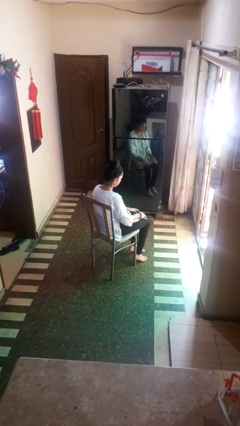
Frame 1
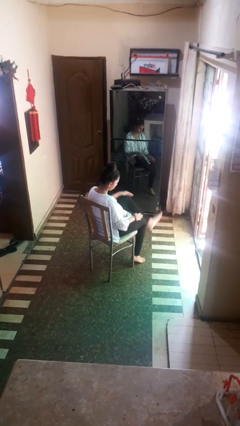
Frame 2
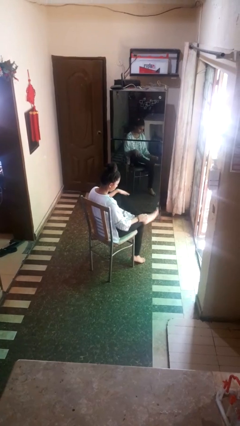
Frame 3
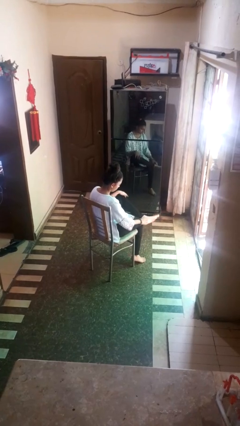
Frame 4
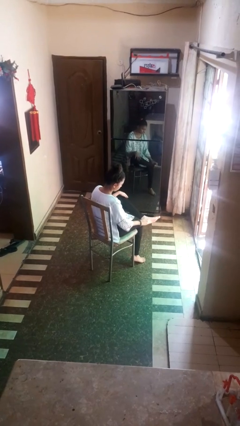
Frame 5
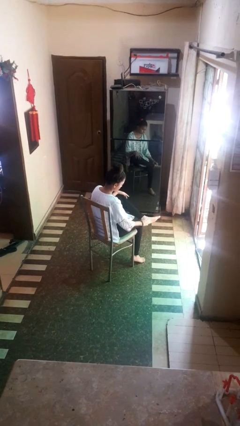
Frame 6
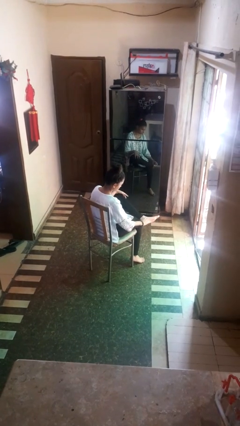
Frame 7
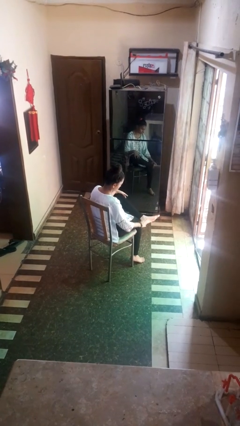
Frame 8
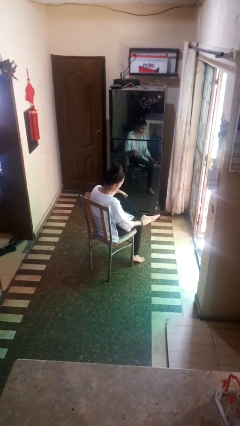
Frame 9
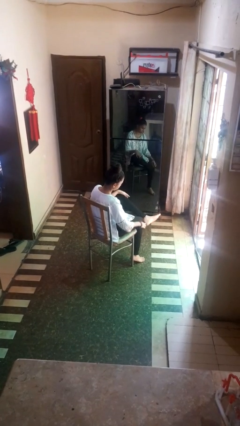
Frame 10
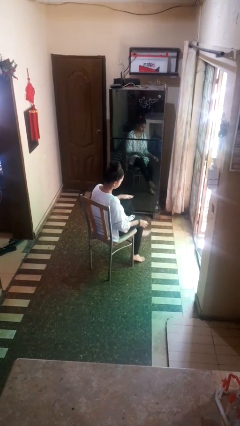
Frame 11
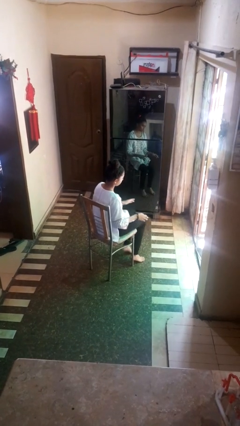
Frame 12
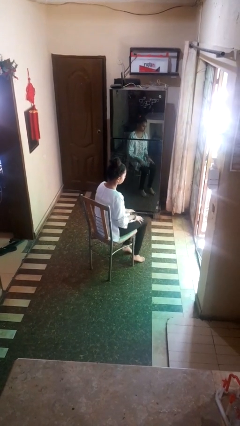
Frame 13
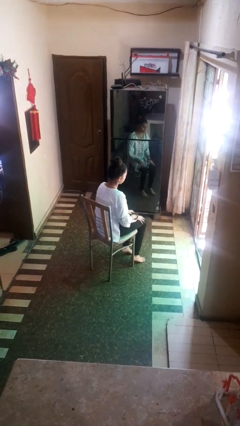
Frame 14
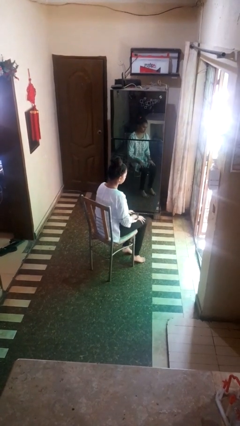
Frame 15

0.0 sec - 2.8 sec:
person rubs foot

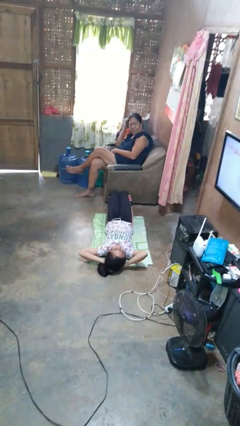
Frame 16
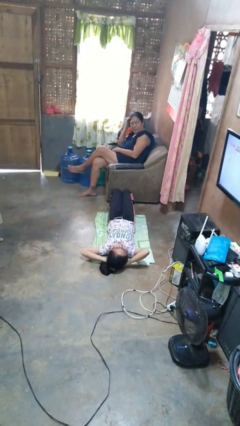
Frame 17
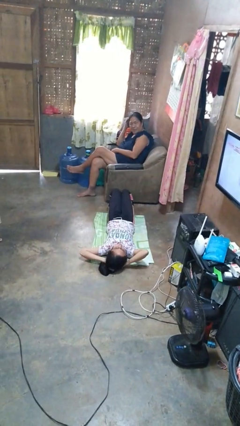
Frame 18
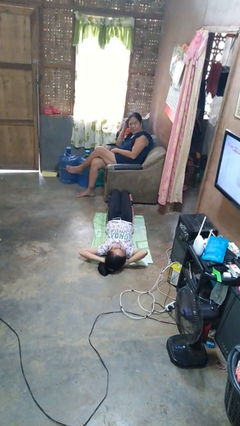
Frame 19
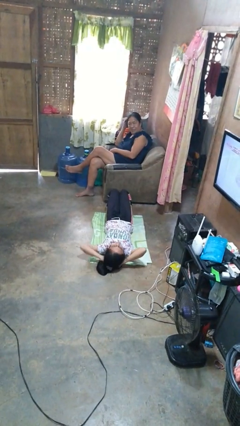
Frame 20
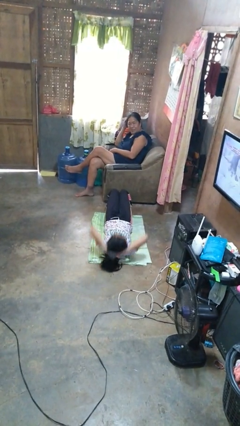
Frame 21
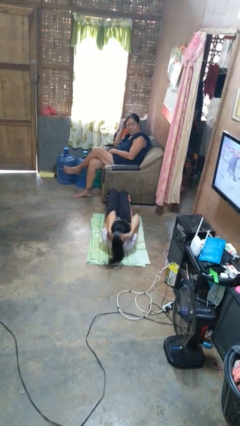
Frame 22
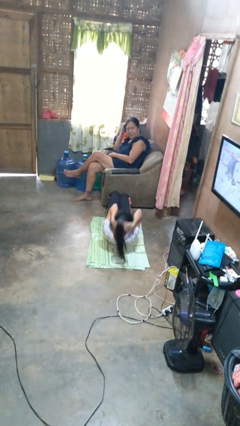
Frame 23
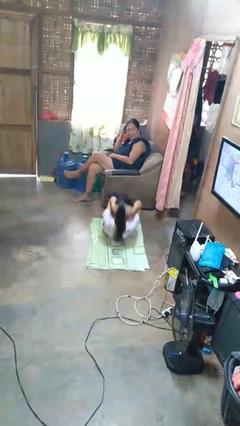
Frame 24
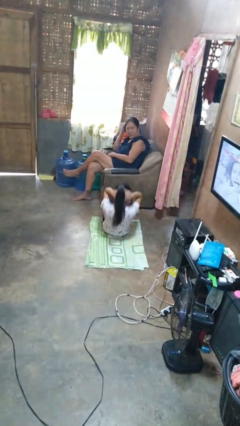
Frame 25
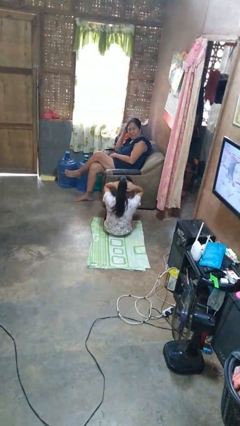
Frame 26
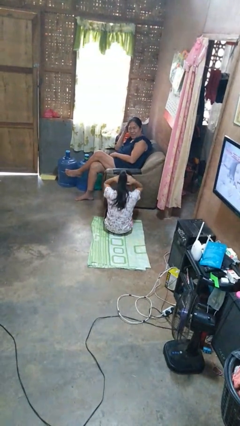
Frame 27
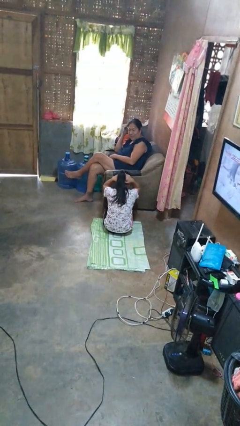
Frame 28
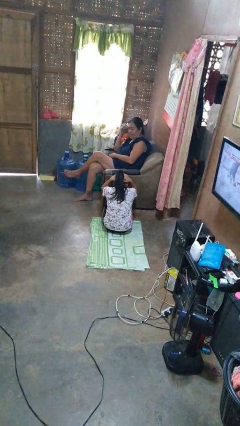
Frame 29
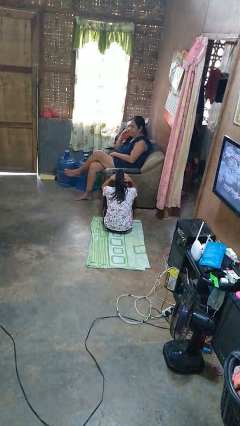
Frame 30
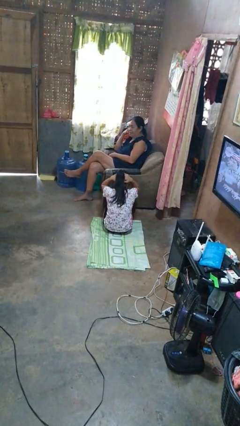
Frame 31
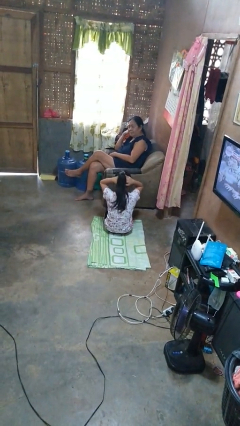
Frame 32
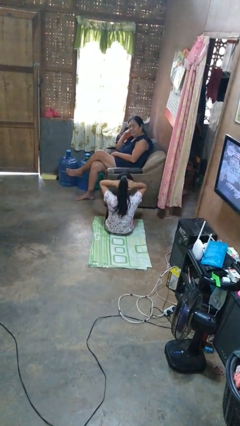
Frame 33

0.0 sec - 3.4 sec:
person exercises with situp

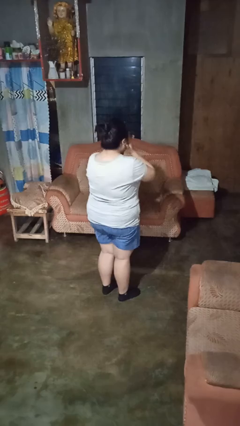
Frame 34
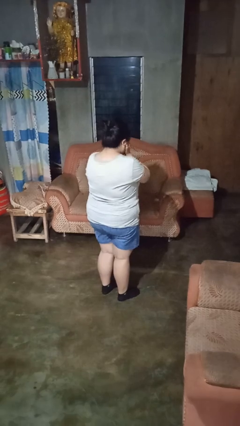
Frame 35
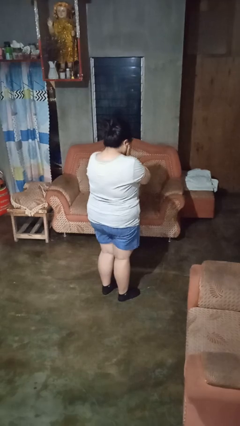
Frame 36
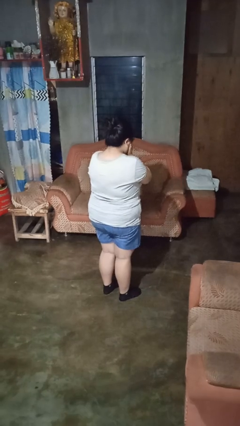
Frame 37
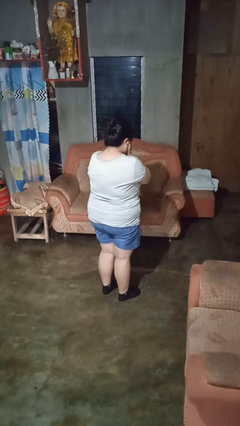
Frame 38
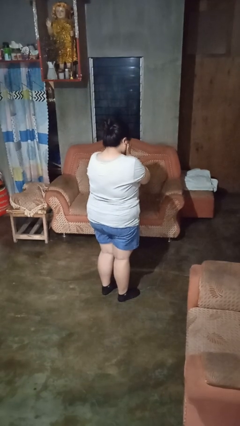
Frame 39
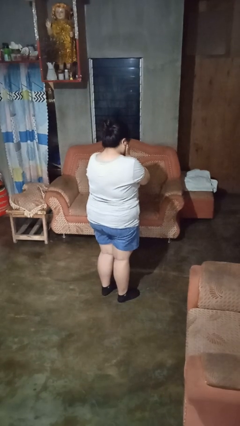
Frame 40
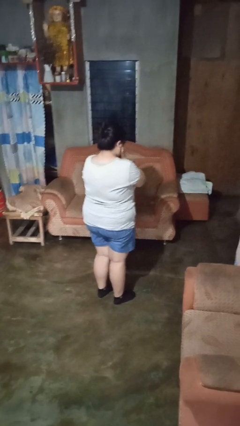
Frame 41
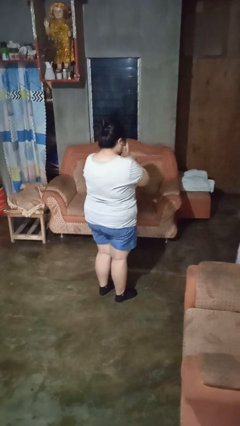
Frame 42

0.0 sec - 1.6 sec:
person covers face with hands

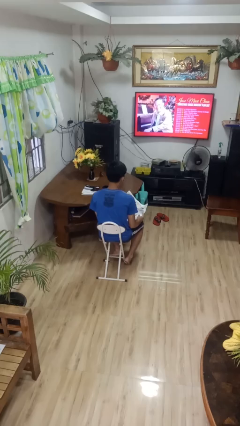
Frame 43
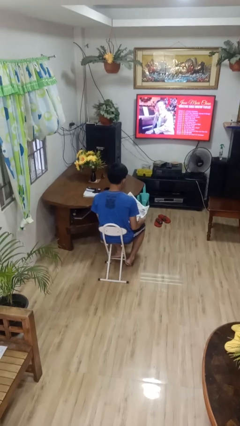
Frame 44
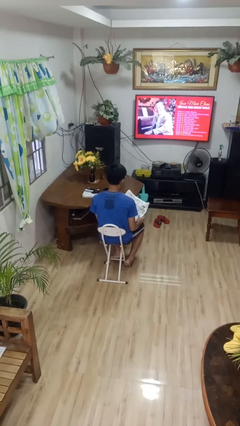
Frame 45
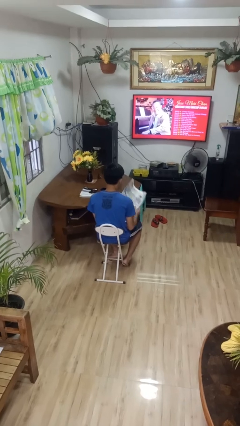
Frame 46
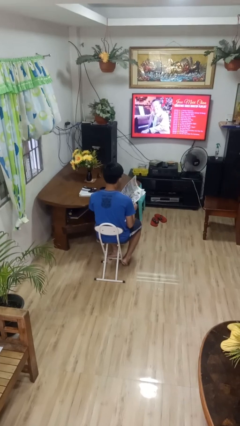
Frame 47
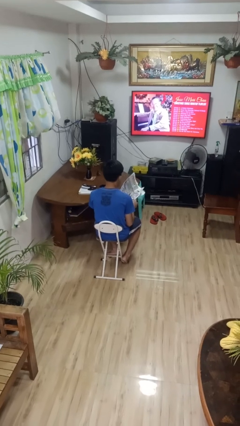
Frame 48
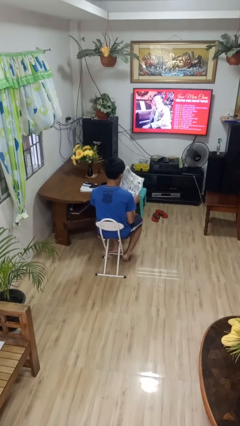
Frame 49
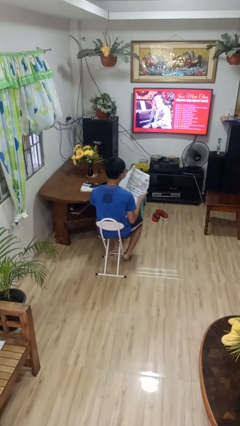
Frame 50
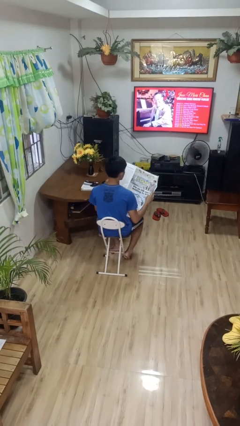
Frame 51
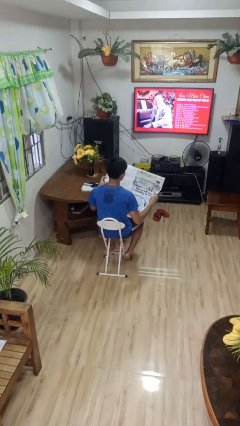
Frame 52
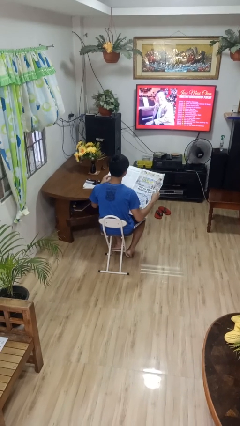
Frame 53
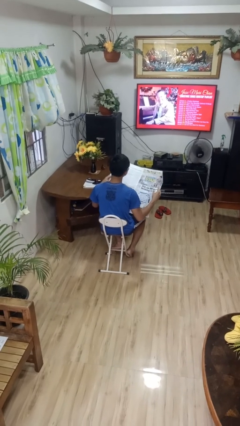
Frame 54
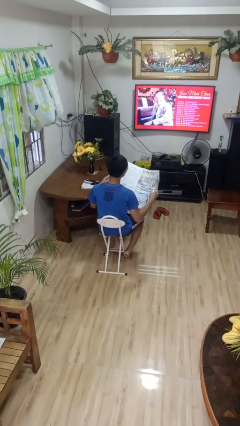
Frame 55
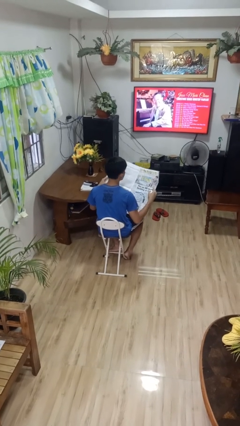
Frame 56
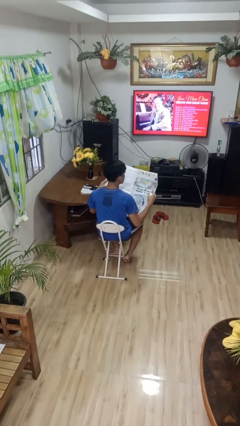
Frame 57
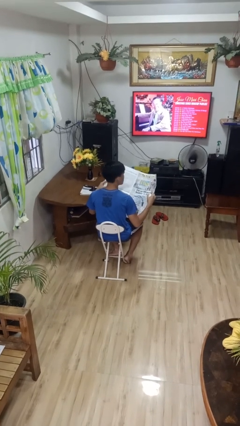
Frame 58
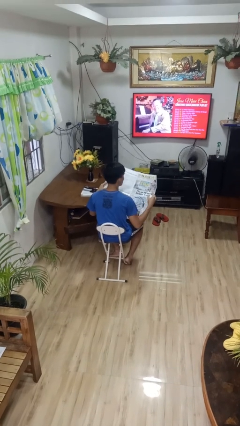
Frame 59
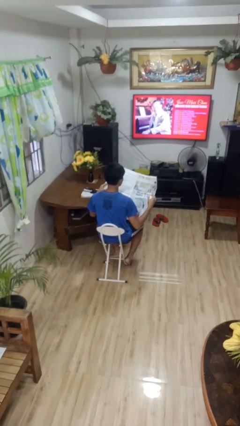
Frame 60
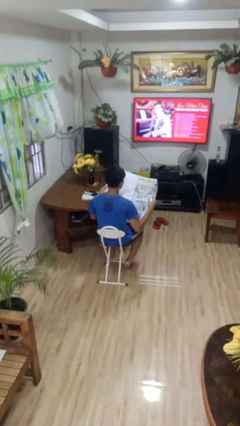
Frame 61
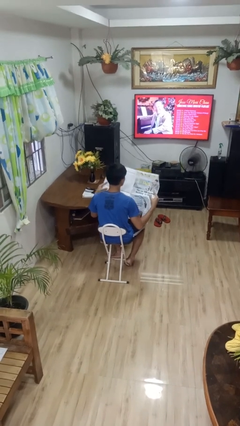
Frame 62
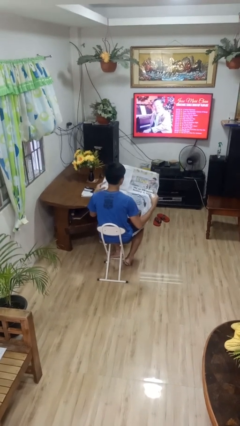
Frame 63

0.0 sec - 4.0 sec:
person reads newspaper

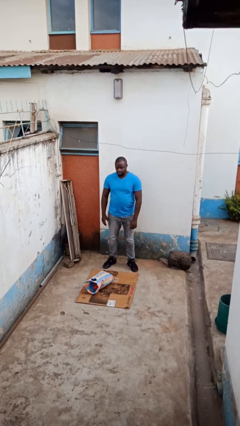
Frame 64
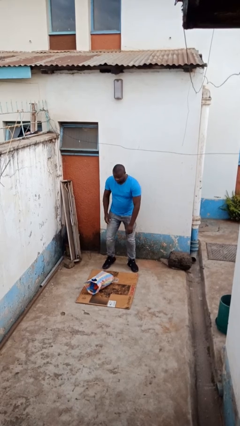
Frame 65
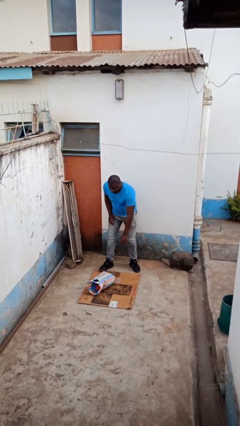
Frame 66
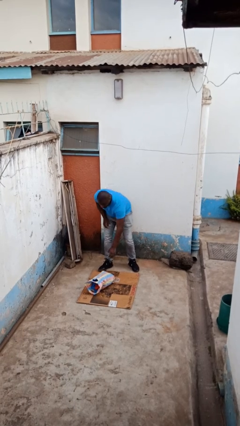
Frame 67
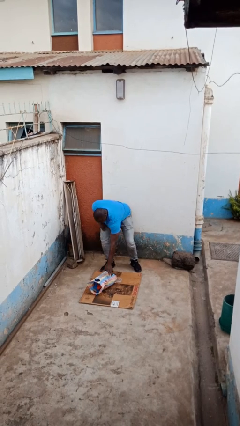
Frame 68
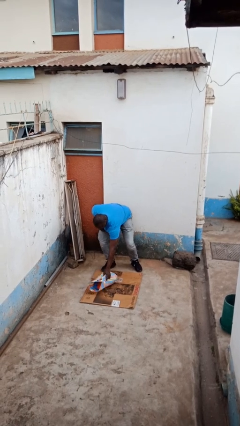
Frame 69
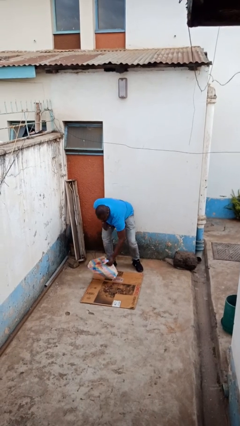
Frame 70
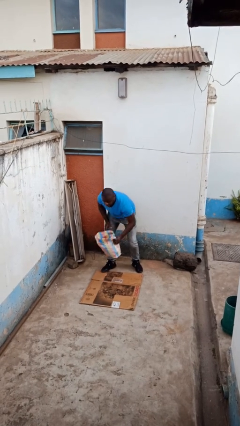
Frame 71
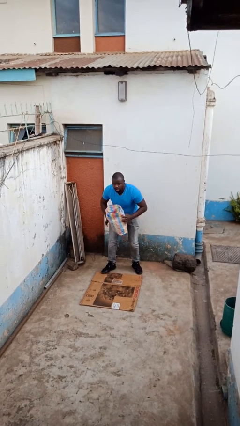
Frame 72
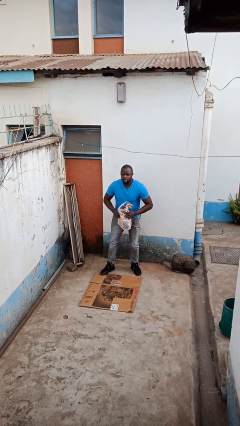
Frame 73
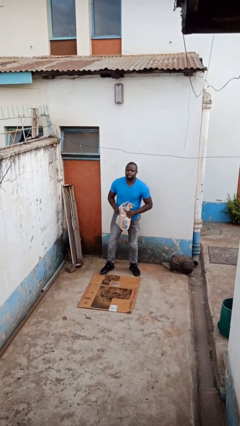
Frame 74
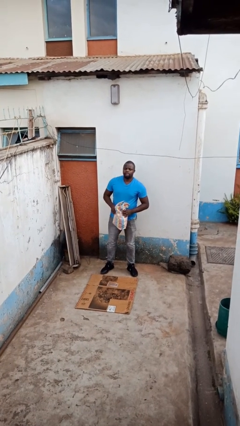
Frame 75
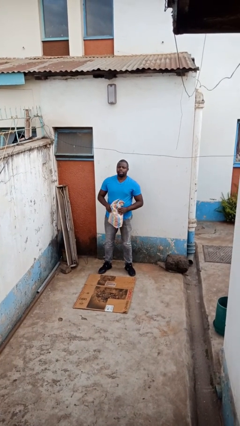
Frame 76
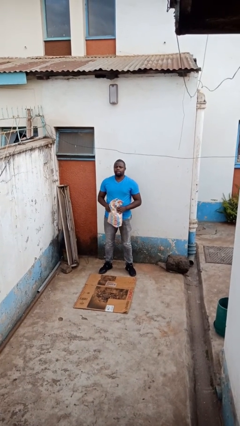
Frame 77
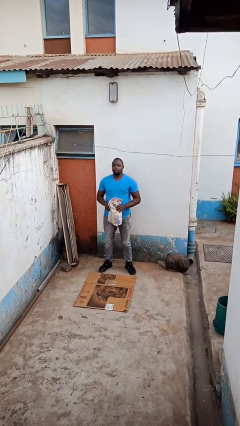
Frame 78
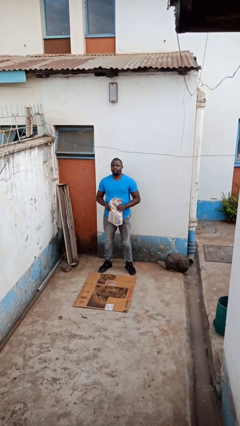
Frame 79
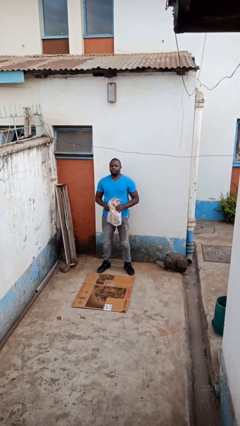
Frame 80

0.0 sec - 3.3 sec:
person picks up object from floor

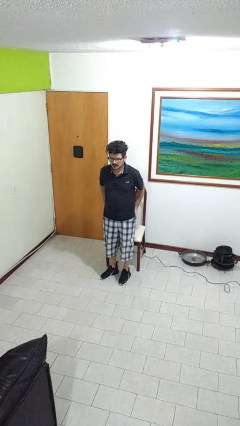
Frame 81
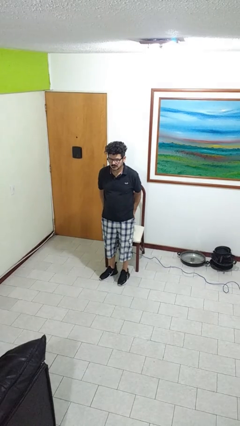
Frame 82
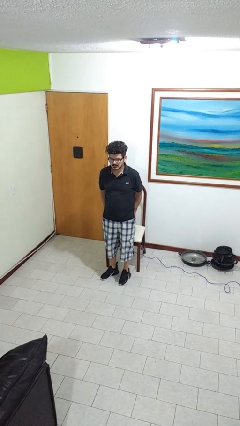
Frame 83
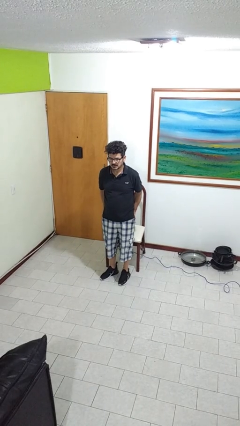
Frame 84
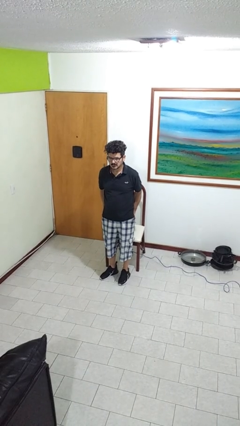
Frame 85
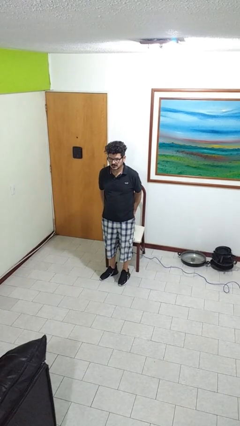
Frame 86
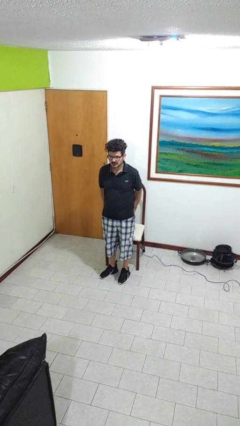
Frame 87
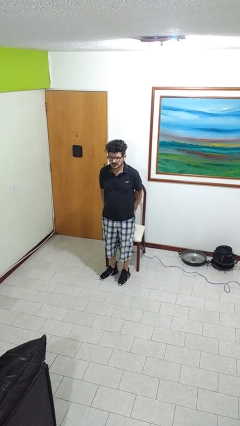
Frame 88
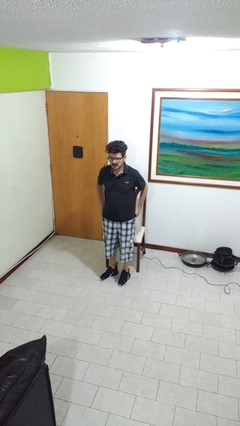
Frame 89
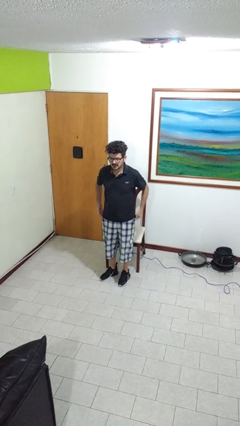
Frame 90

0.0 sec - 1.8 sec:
person puts hands in back pockets

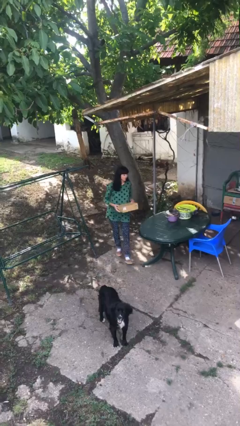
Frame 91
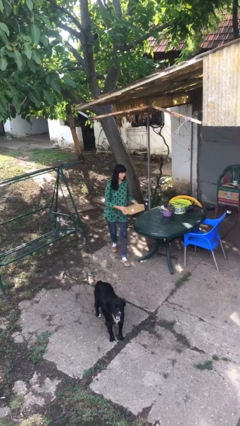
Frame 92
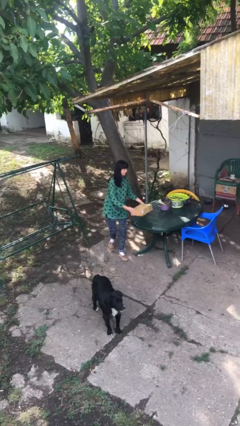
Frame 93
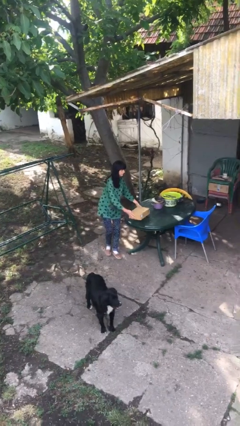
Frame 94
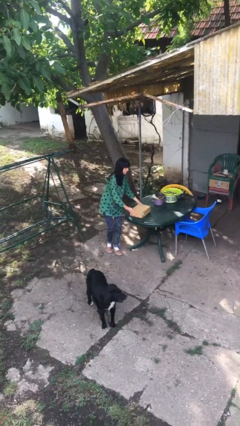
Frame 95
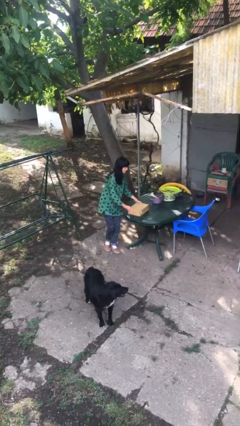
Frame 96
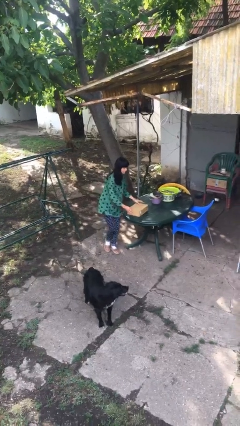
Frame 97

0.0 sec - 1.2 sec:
person puts down object on table
